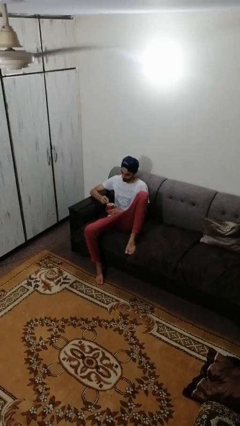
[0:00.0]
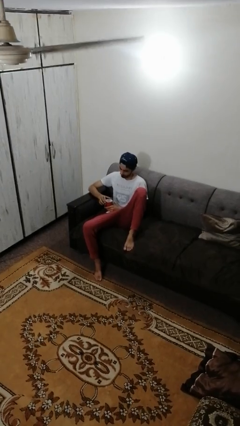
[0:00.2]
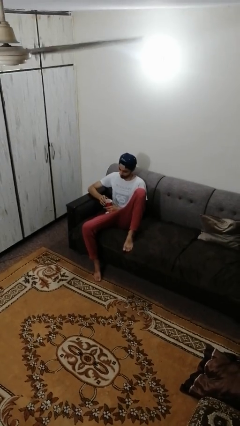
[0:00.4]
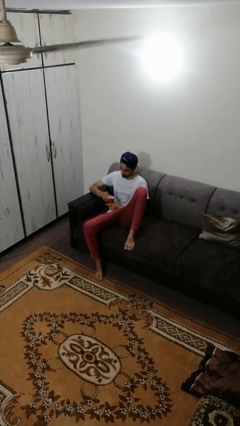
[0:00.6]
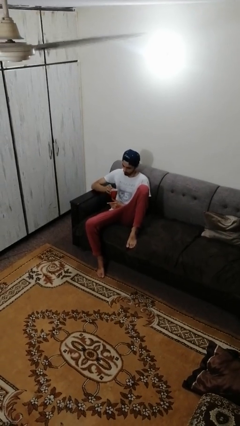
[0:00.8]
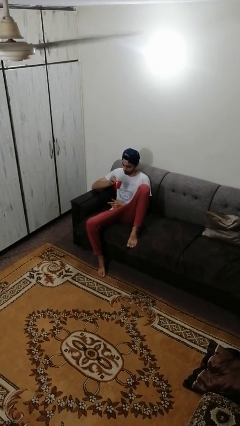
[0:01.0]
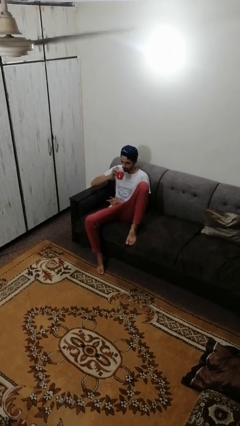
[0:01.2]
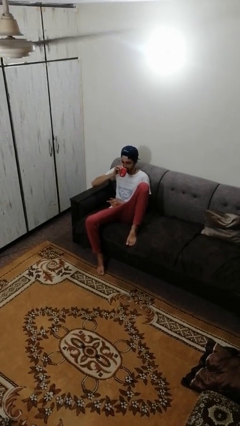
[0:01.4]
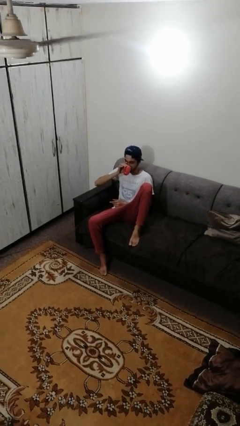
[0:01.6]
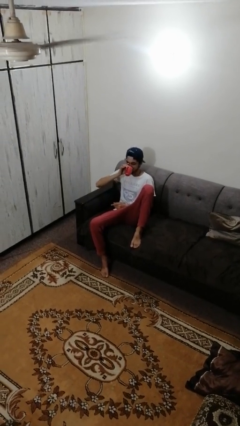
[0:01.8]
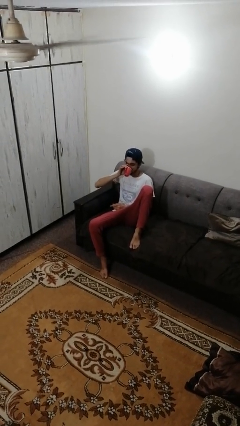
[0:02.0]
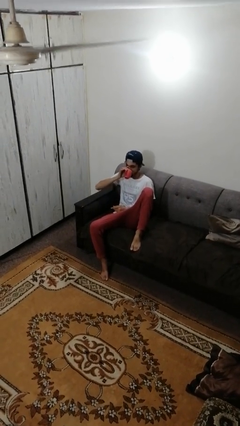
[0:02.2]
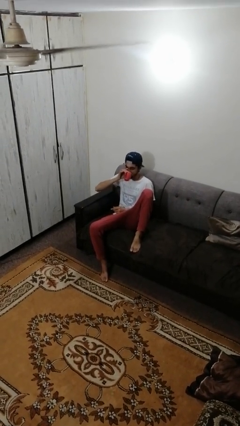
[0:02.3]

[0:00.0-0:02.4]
person drinks from mug

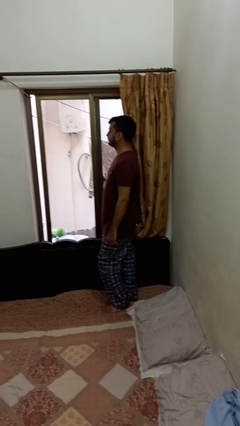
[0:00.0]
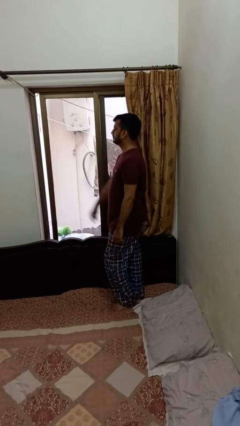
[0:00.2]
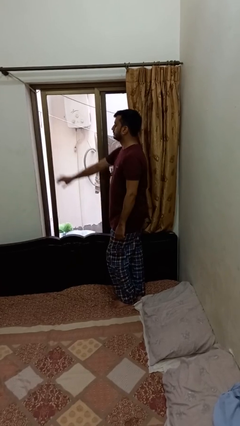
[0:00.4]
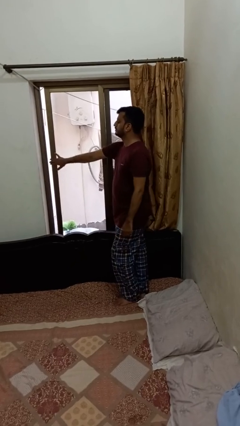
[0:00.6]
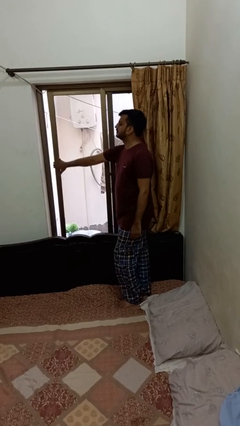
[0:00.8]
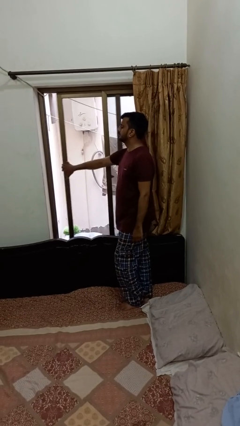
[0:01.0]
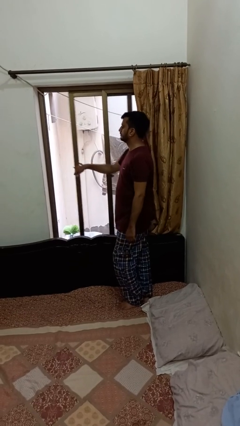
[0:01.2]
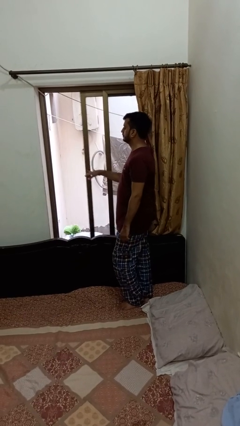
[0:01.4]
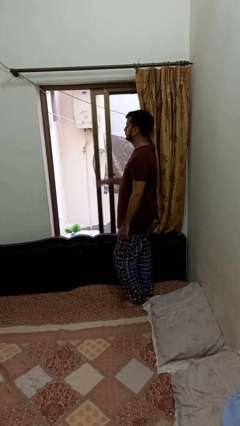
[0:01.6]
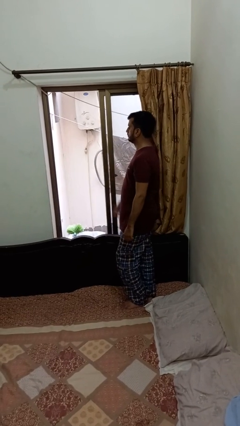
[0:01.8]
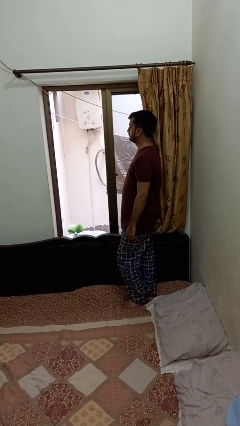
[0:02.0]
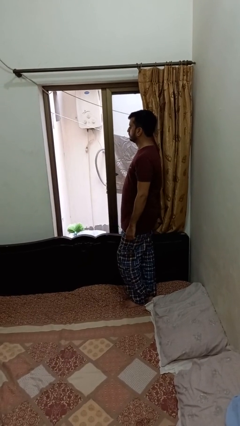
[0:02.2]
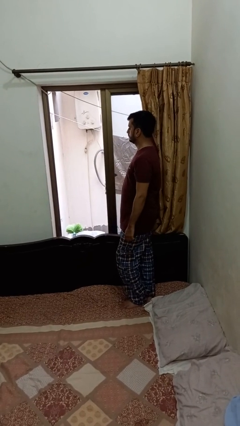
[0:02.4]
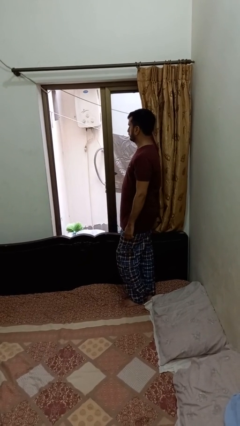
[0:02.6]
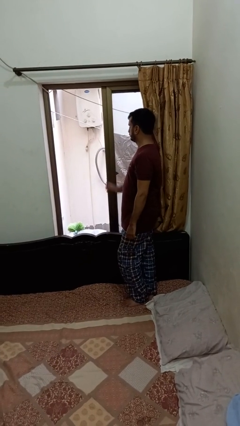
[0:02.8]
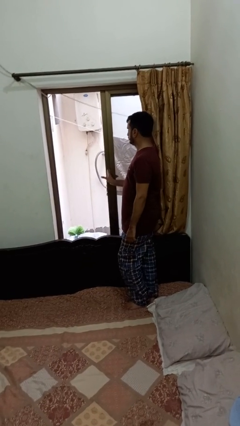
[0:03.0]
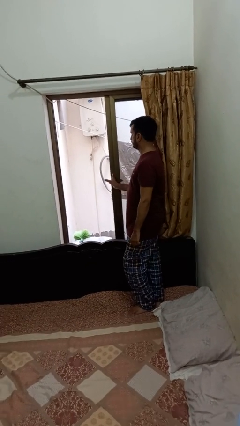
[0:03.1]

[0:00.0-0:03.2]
person opens home window

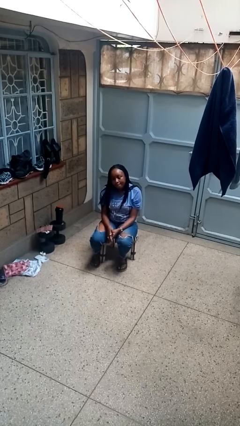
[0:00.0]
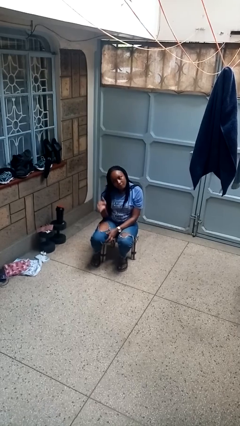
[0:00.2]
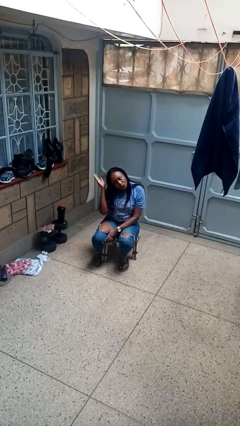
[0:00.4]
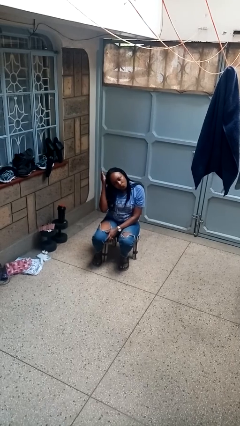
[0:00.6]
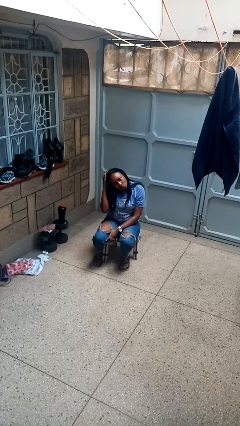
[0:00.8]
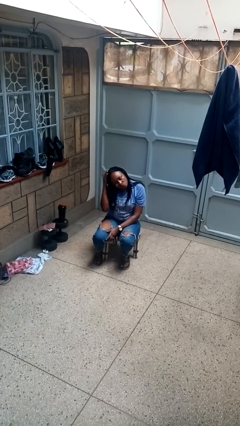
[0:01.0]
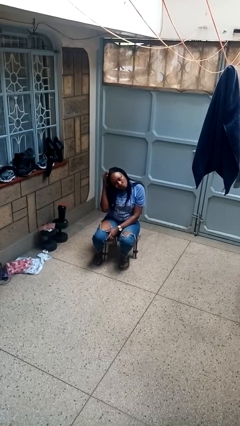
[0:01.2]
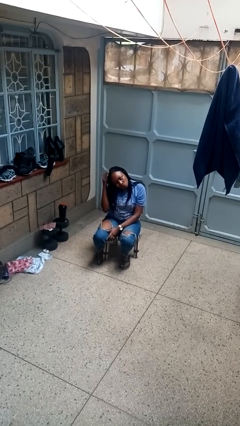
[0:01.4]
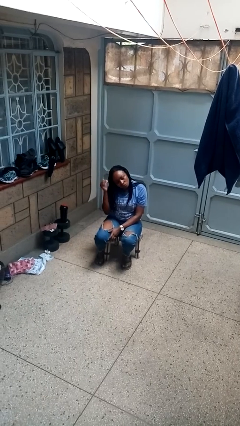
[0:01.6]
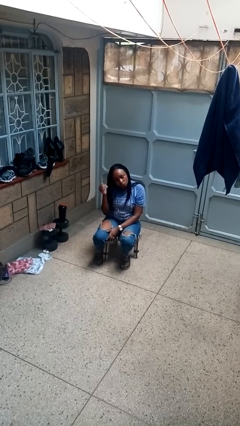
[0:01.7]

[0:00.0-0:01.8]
person pats head

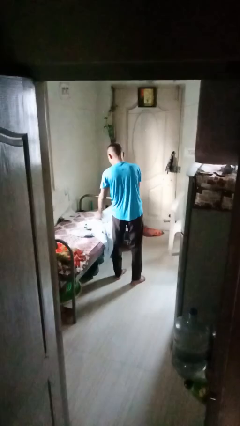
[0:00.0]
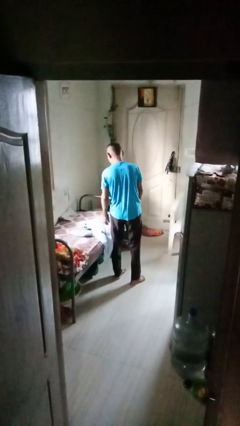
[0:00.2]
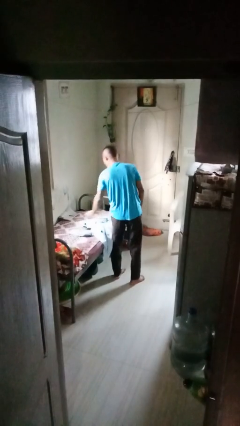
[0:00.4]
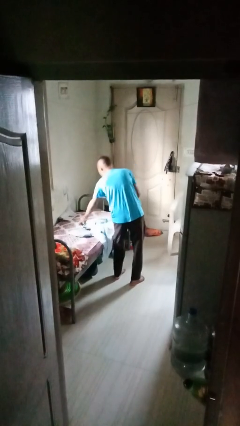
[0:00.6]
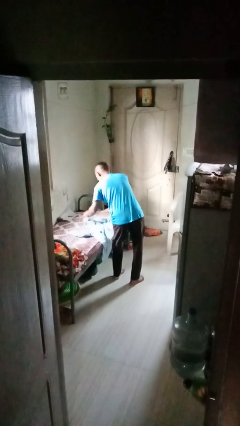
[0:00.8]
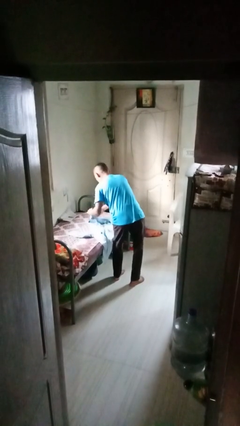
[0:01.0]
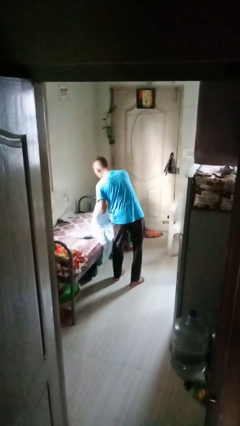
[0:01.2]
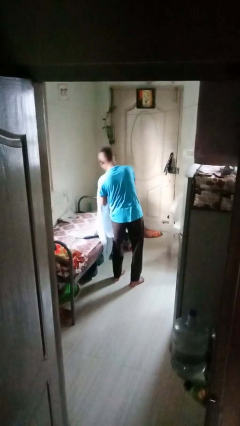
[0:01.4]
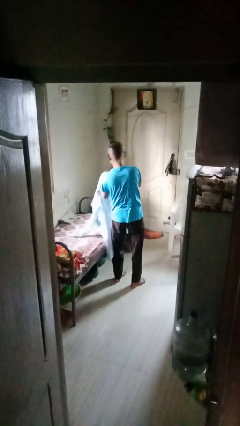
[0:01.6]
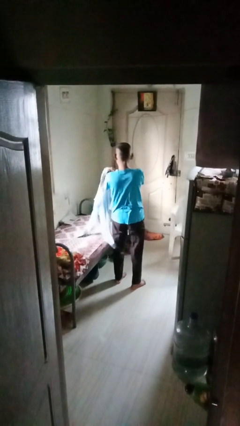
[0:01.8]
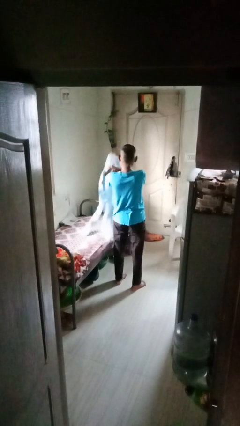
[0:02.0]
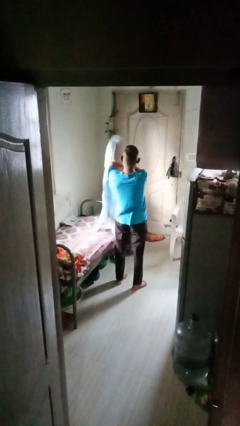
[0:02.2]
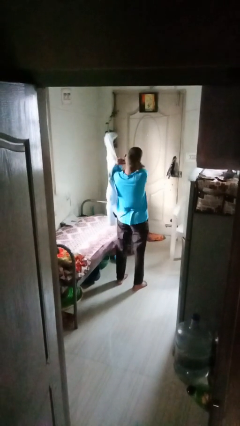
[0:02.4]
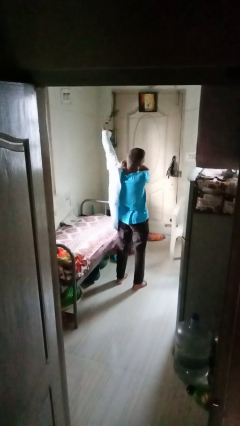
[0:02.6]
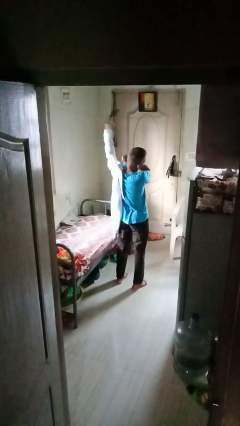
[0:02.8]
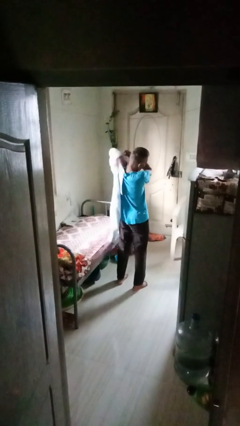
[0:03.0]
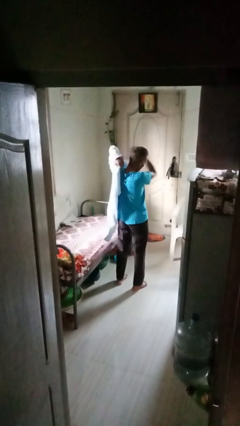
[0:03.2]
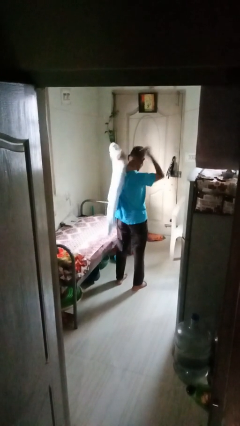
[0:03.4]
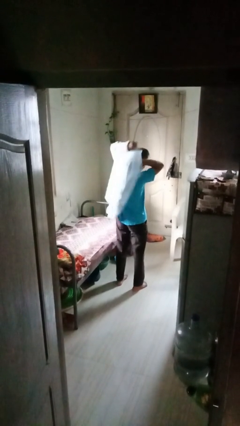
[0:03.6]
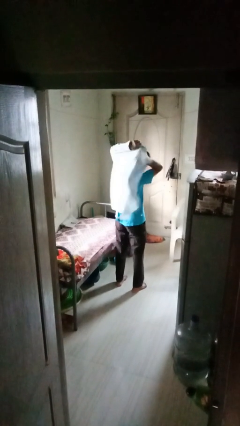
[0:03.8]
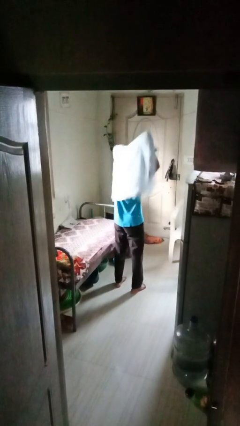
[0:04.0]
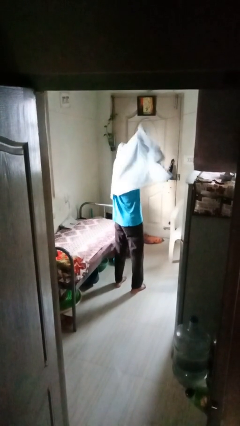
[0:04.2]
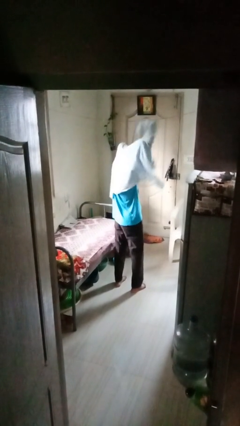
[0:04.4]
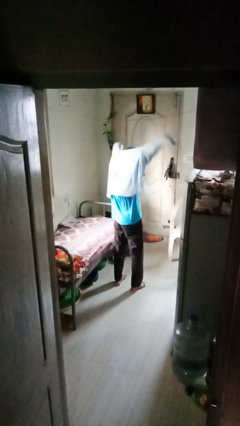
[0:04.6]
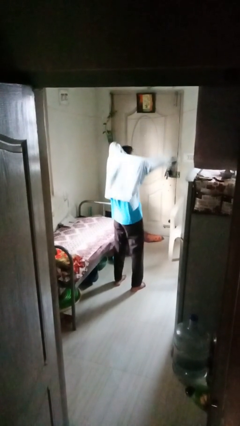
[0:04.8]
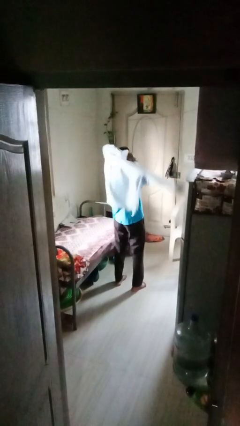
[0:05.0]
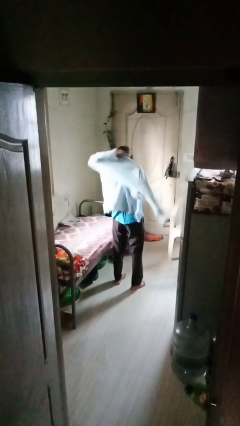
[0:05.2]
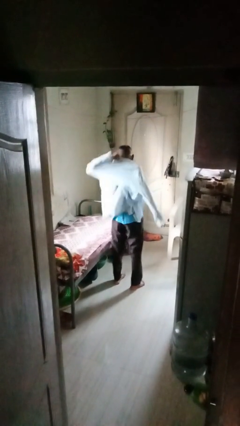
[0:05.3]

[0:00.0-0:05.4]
person puts on shirt

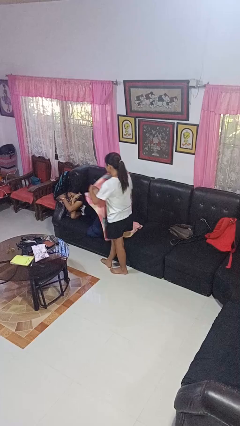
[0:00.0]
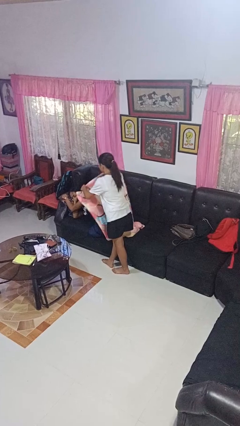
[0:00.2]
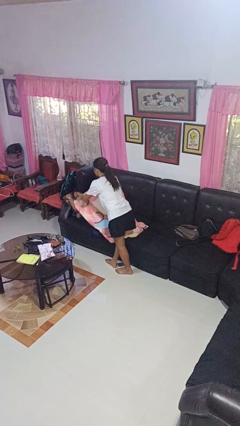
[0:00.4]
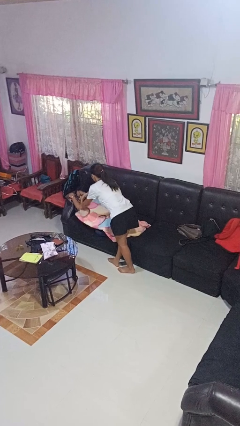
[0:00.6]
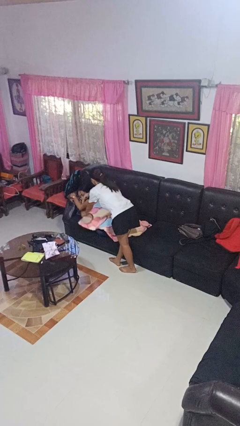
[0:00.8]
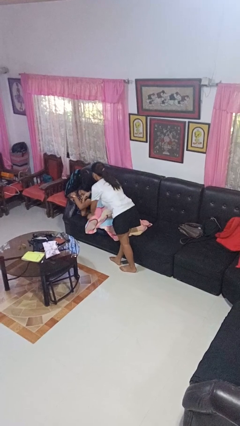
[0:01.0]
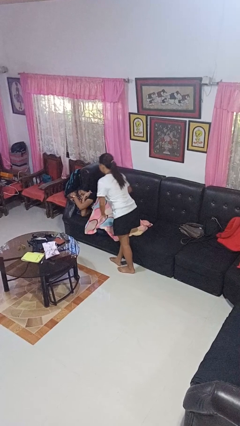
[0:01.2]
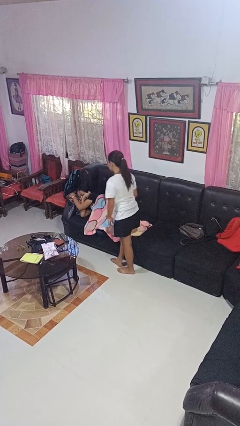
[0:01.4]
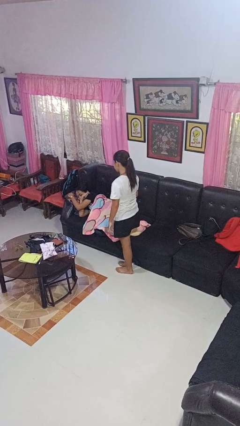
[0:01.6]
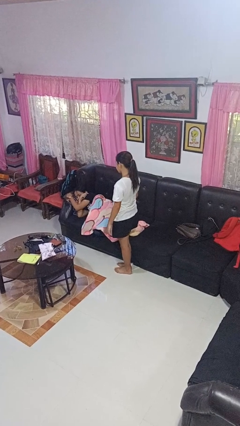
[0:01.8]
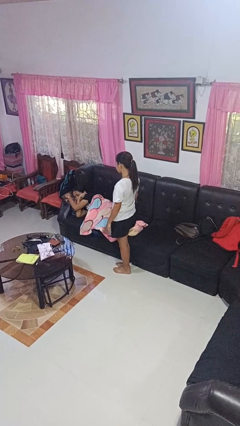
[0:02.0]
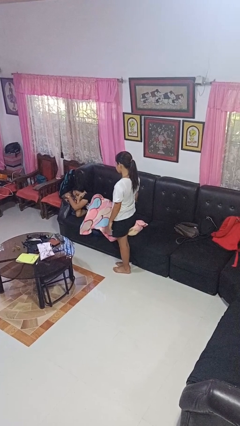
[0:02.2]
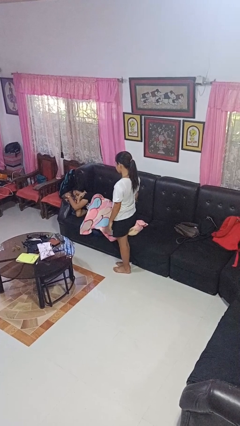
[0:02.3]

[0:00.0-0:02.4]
person covers friend with blanket

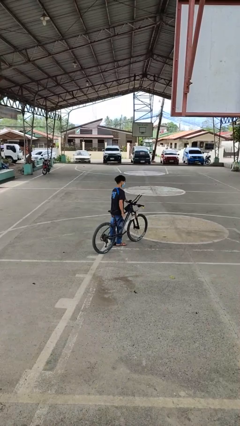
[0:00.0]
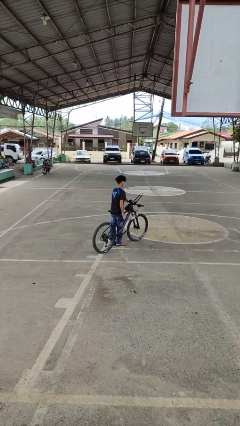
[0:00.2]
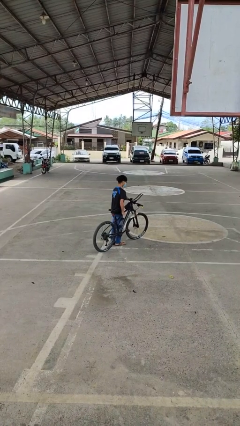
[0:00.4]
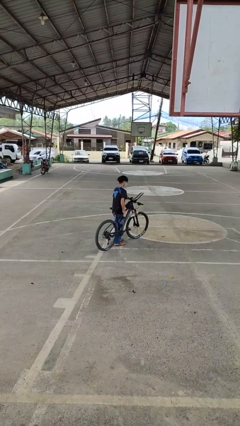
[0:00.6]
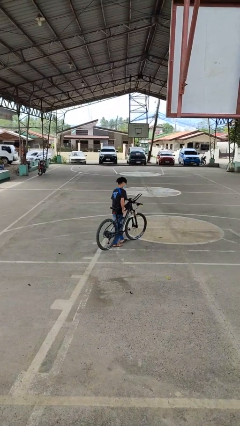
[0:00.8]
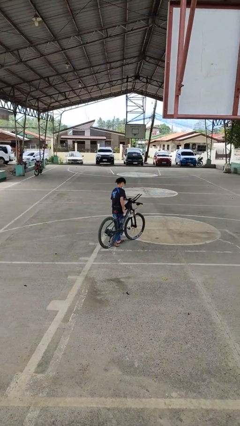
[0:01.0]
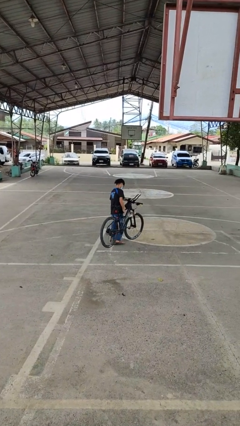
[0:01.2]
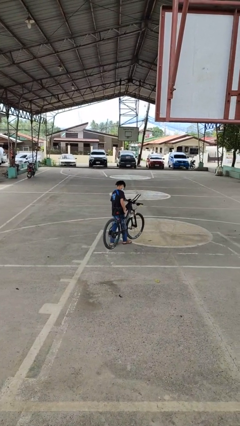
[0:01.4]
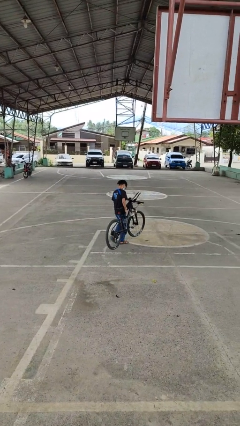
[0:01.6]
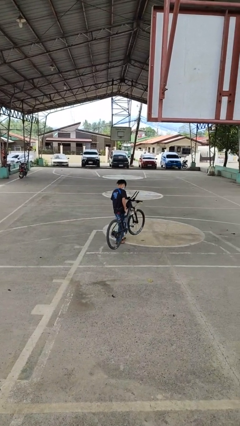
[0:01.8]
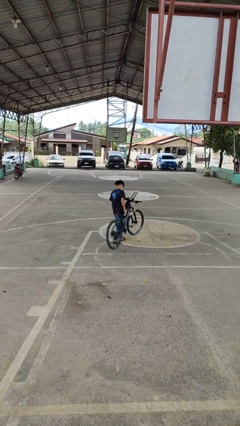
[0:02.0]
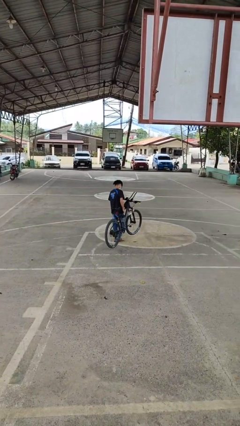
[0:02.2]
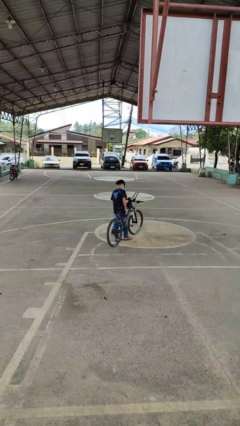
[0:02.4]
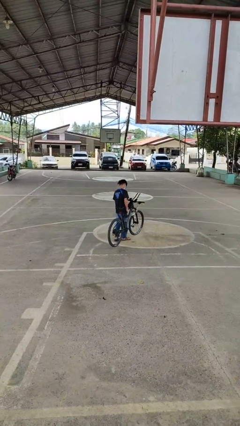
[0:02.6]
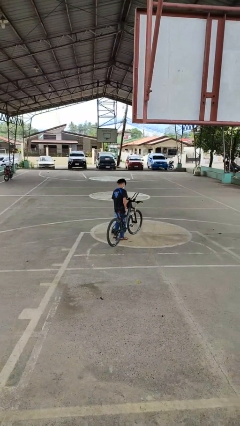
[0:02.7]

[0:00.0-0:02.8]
person carries bicycle
